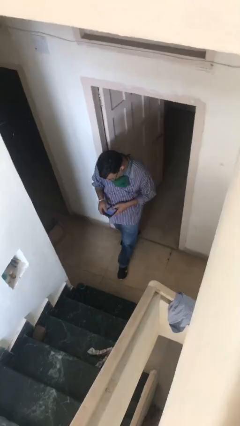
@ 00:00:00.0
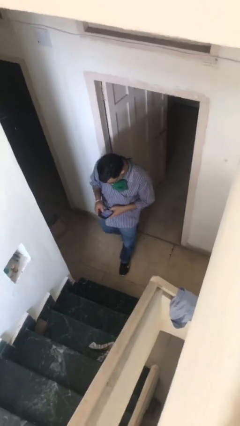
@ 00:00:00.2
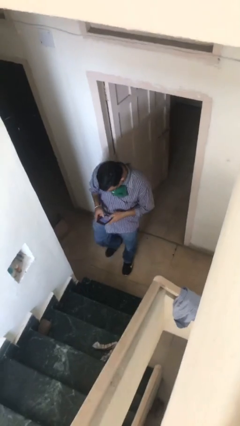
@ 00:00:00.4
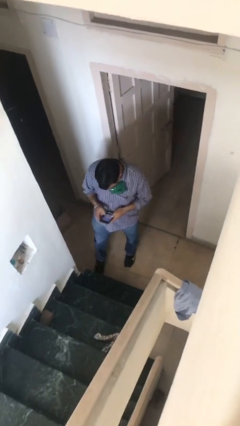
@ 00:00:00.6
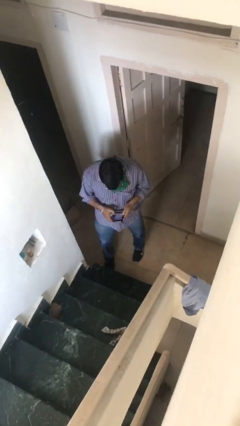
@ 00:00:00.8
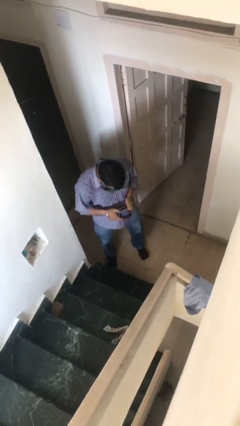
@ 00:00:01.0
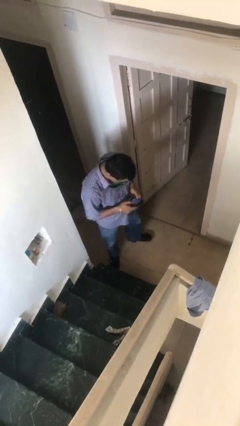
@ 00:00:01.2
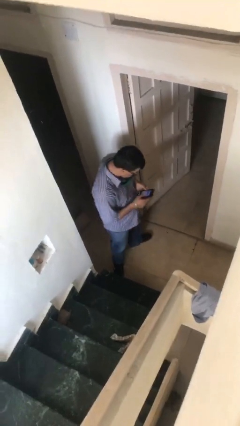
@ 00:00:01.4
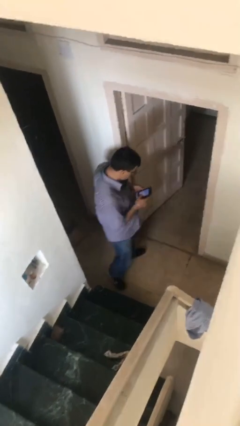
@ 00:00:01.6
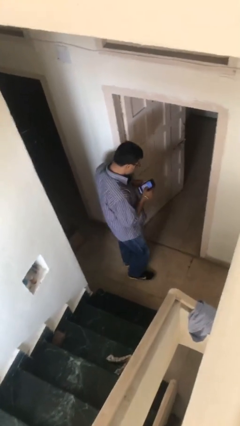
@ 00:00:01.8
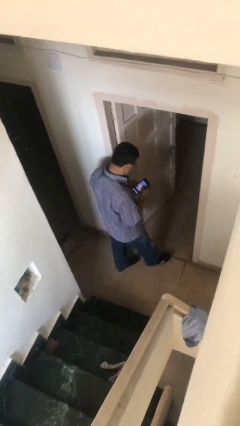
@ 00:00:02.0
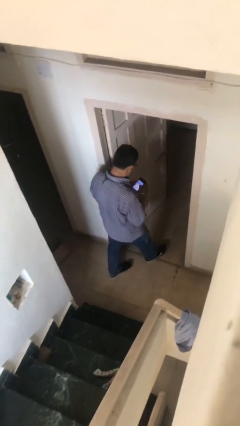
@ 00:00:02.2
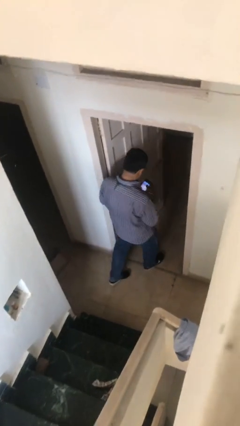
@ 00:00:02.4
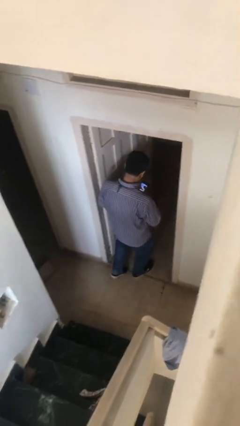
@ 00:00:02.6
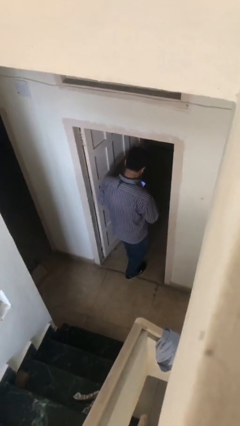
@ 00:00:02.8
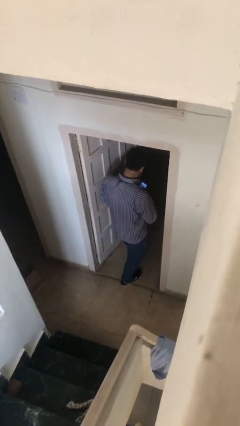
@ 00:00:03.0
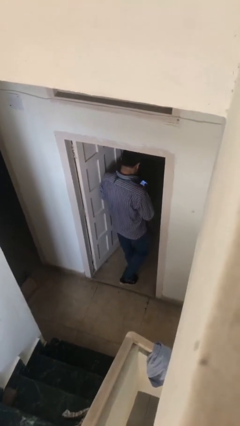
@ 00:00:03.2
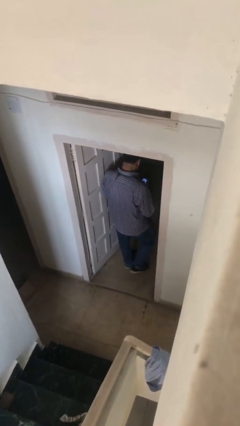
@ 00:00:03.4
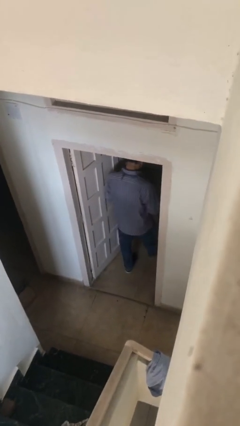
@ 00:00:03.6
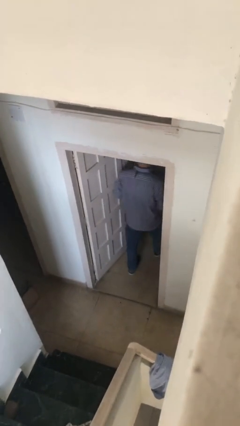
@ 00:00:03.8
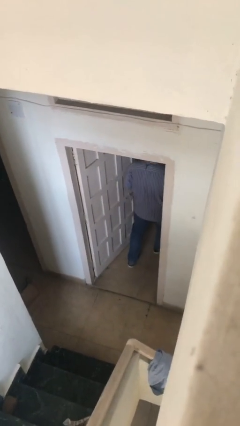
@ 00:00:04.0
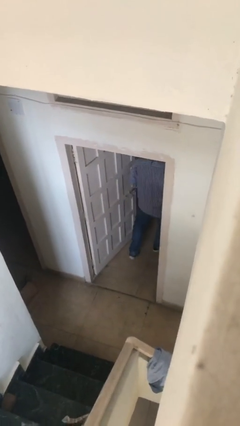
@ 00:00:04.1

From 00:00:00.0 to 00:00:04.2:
person exits scene through structure

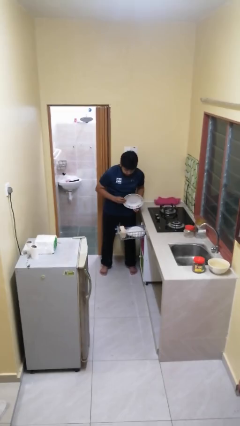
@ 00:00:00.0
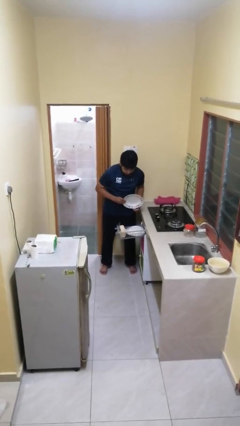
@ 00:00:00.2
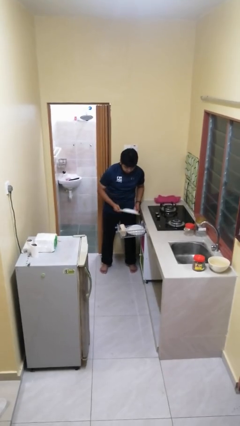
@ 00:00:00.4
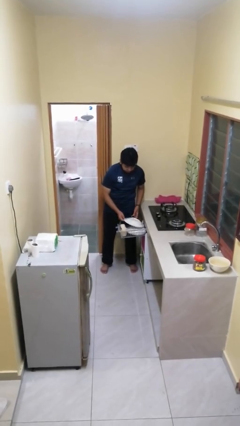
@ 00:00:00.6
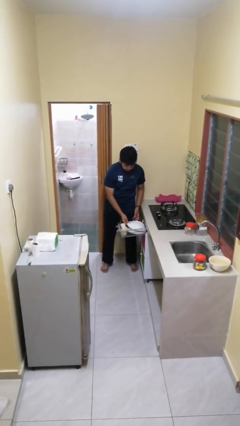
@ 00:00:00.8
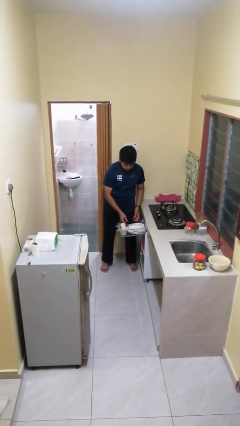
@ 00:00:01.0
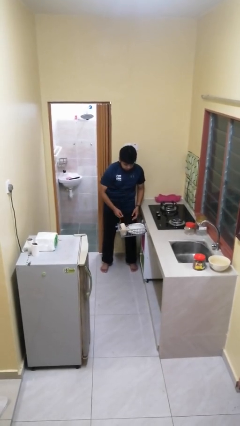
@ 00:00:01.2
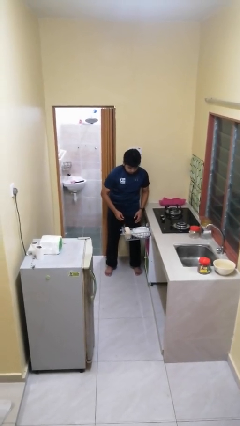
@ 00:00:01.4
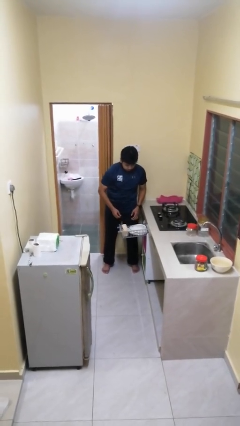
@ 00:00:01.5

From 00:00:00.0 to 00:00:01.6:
person puts object into kitchen drawer

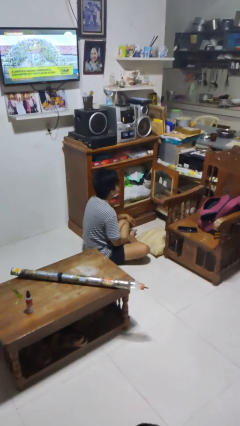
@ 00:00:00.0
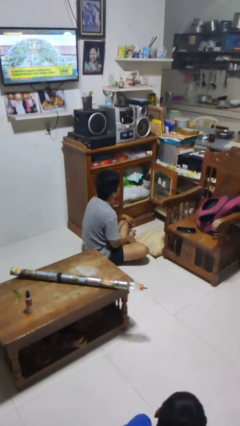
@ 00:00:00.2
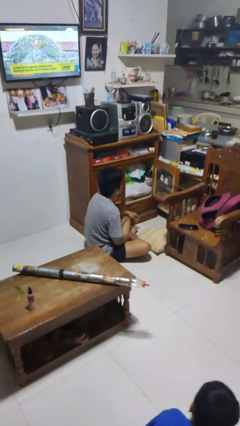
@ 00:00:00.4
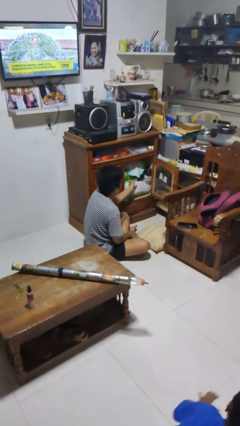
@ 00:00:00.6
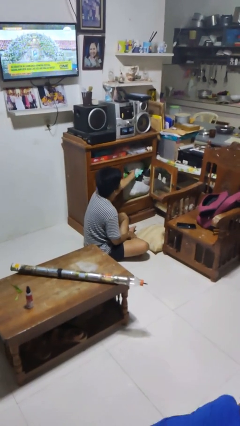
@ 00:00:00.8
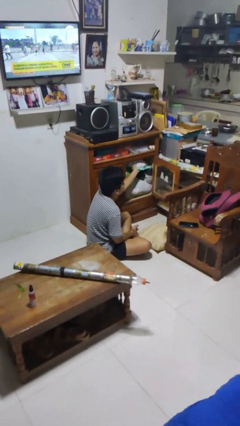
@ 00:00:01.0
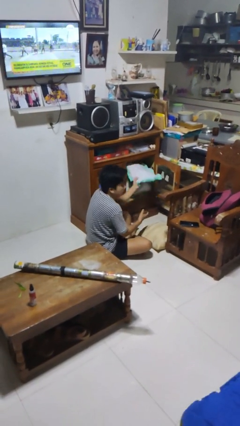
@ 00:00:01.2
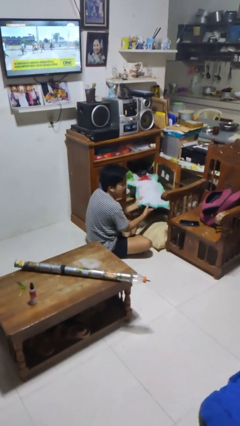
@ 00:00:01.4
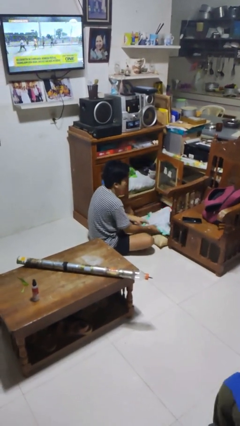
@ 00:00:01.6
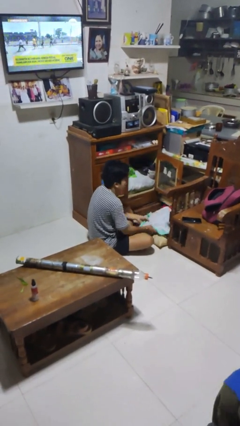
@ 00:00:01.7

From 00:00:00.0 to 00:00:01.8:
person puts clothes into dresser

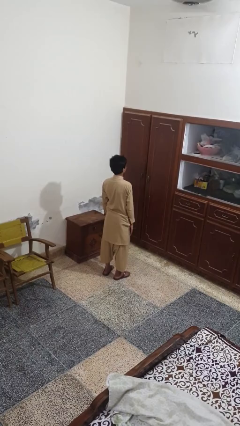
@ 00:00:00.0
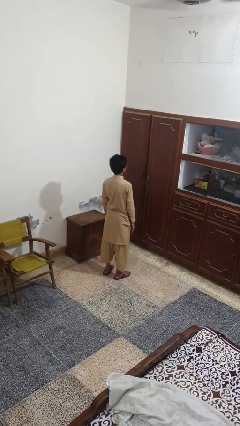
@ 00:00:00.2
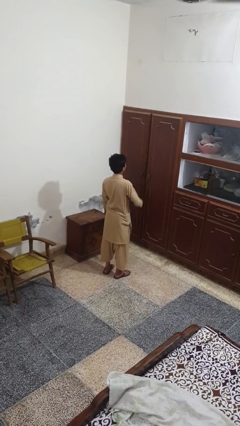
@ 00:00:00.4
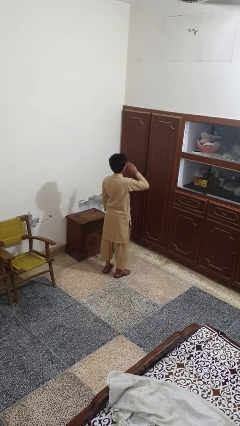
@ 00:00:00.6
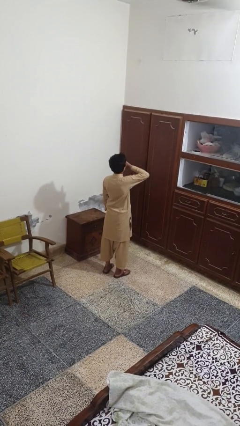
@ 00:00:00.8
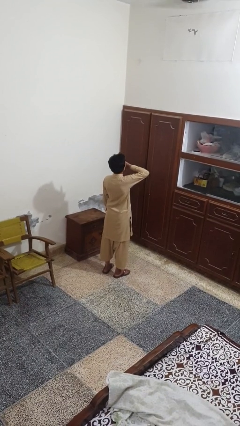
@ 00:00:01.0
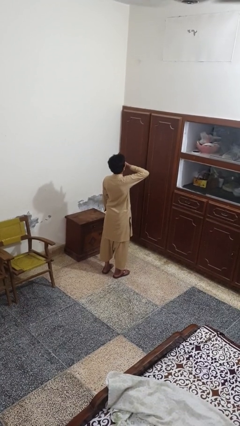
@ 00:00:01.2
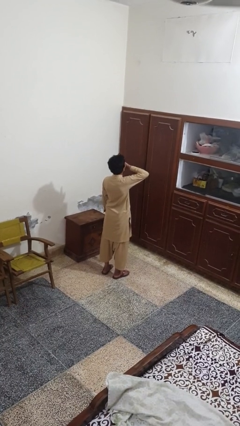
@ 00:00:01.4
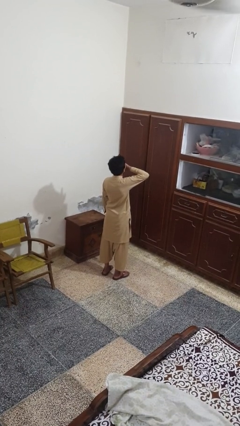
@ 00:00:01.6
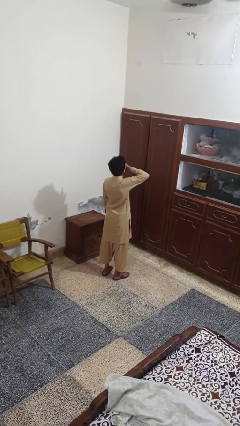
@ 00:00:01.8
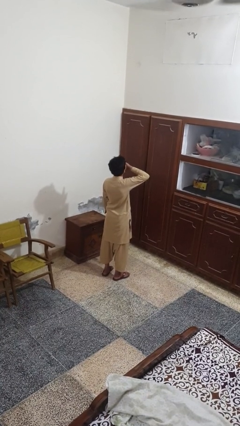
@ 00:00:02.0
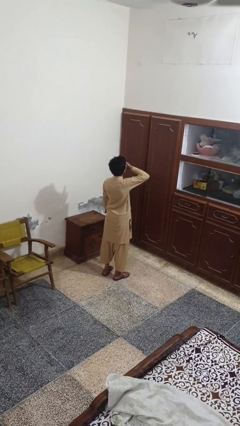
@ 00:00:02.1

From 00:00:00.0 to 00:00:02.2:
person yawns

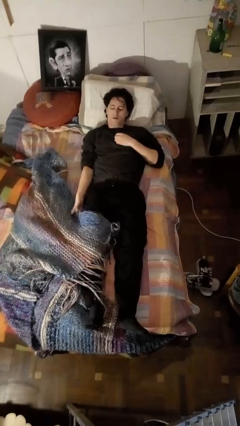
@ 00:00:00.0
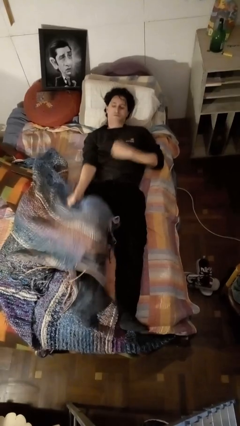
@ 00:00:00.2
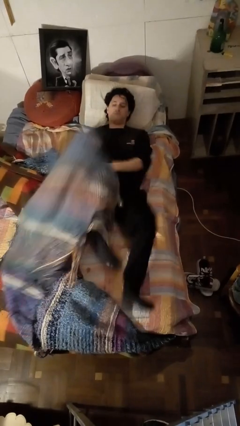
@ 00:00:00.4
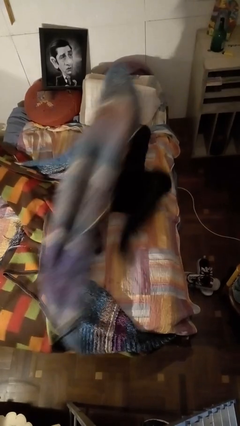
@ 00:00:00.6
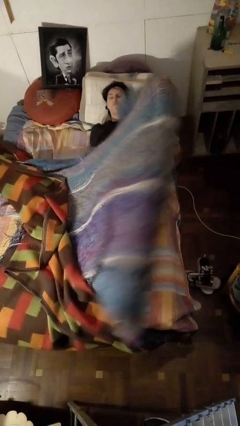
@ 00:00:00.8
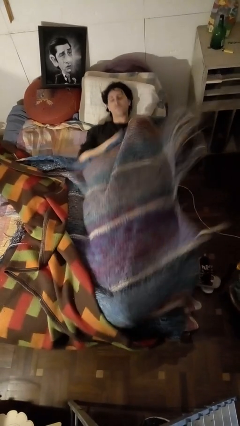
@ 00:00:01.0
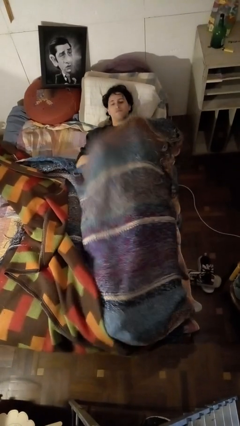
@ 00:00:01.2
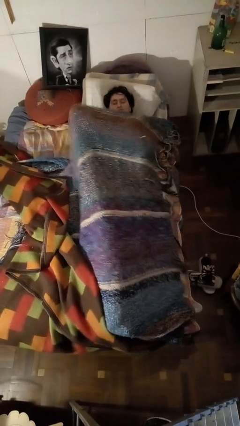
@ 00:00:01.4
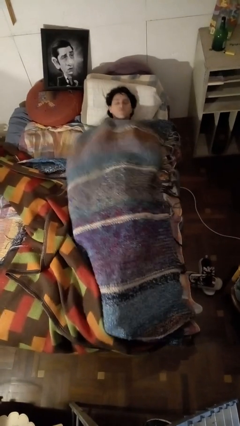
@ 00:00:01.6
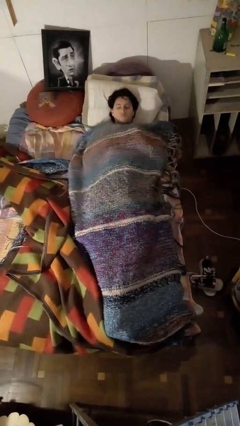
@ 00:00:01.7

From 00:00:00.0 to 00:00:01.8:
person covers with bedsheets

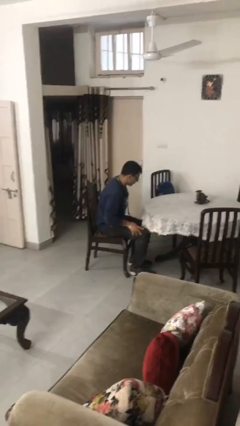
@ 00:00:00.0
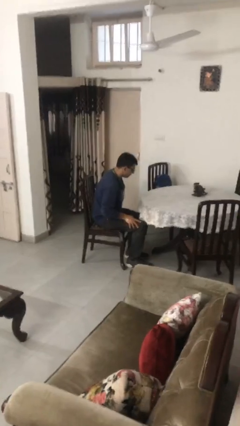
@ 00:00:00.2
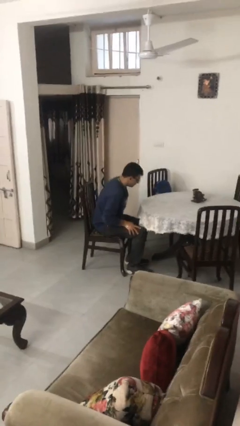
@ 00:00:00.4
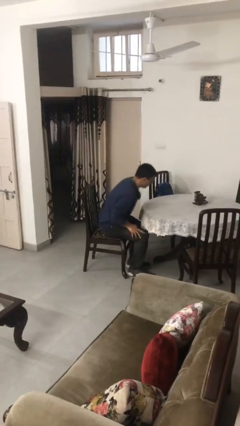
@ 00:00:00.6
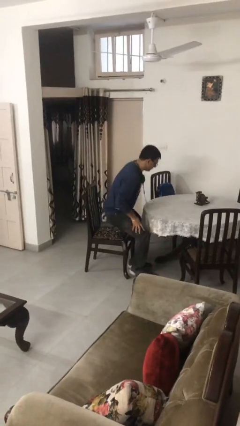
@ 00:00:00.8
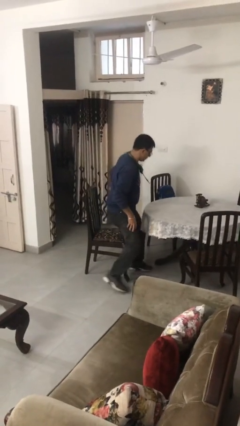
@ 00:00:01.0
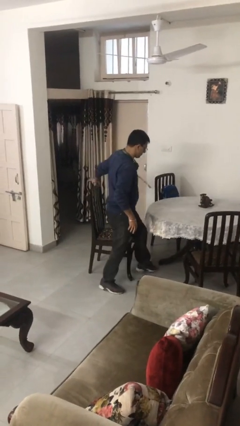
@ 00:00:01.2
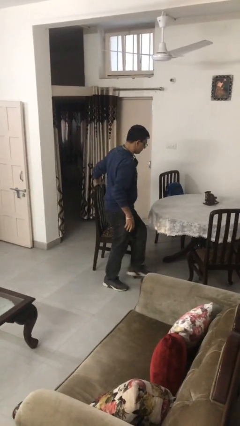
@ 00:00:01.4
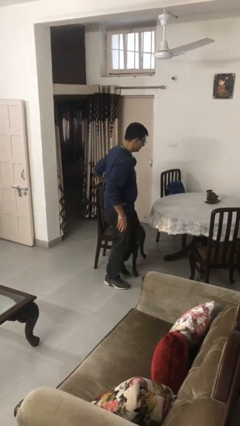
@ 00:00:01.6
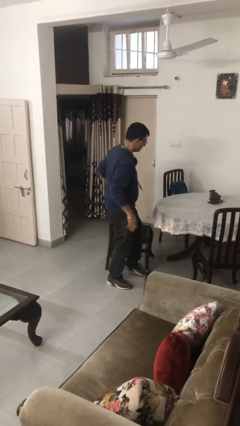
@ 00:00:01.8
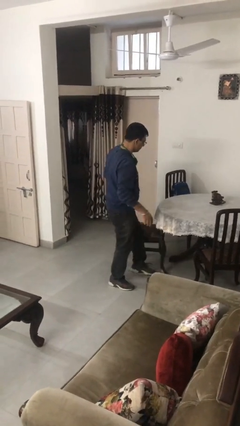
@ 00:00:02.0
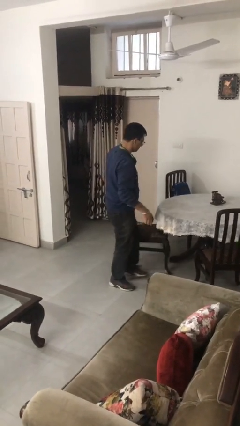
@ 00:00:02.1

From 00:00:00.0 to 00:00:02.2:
person stands up

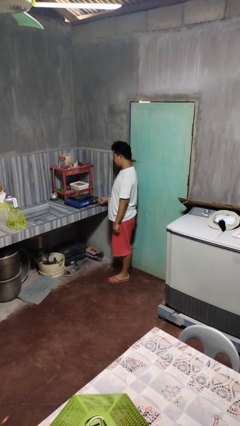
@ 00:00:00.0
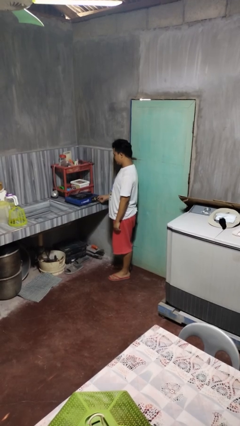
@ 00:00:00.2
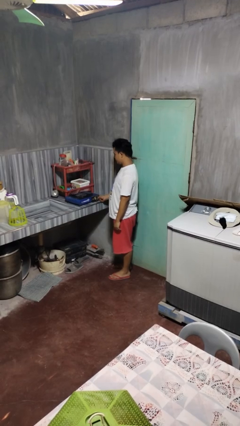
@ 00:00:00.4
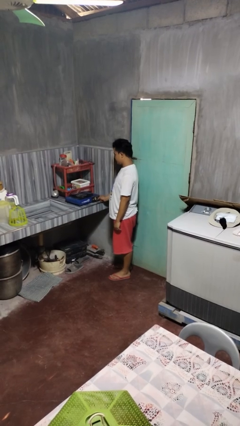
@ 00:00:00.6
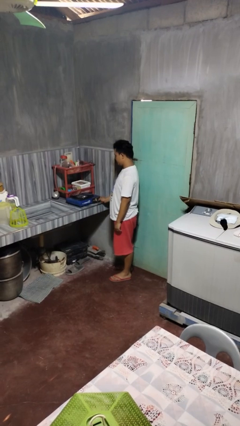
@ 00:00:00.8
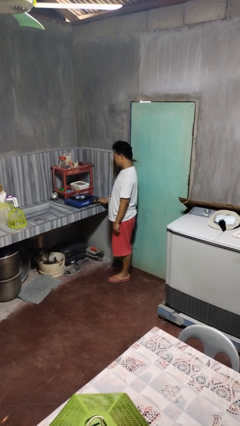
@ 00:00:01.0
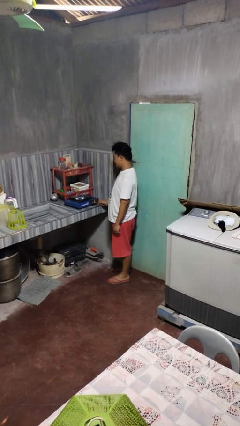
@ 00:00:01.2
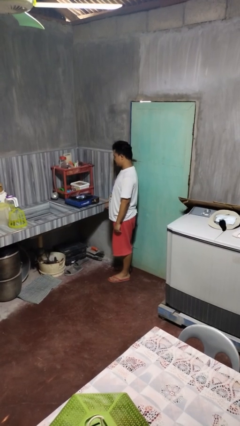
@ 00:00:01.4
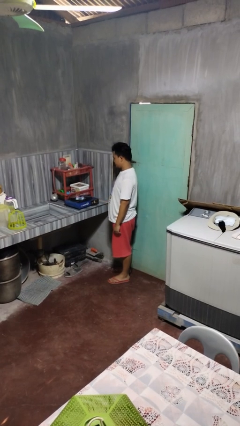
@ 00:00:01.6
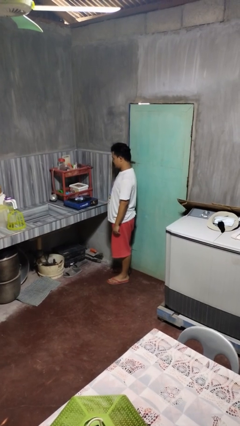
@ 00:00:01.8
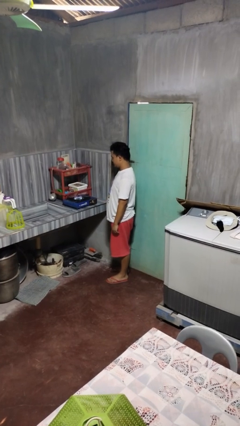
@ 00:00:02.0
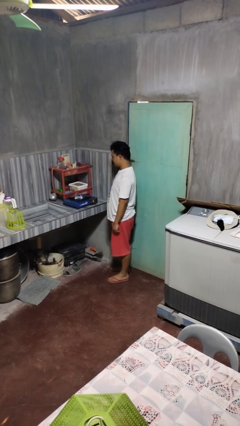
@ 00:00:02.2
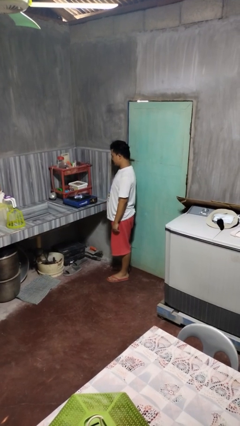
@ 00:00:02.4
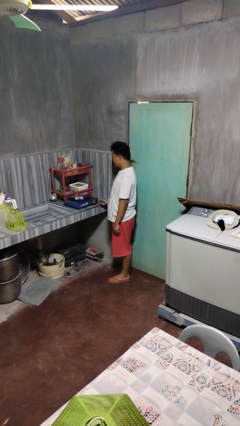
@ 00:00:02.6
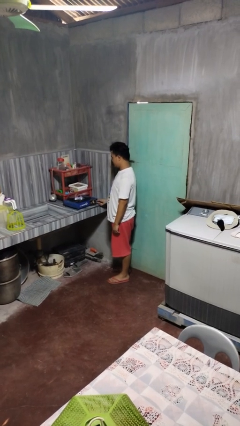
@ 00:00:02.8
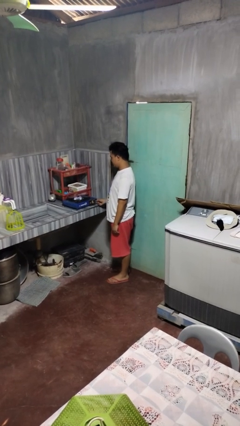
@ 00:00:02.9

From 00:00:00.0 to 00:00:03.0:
person turns on stovetop
